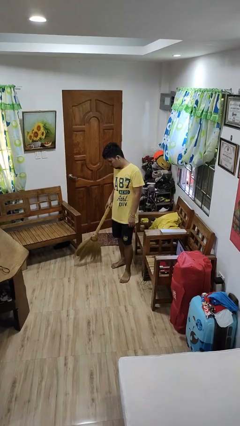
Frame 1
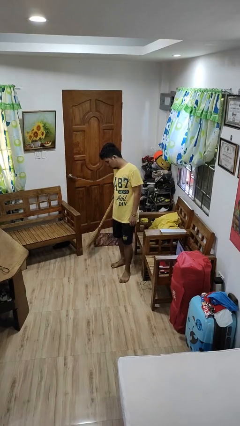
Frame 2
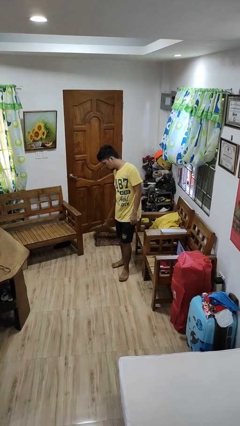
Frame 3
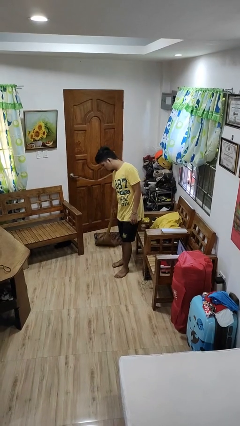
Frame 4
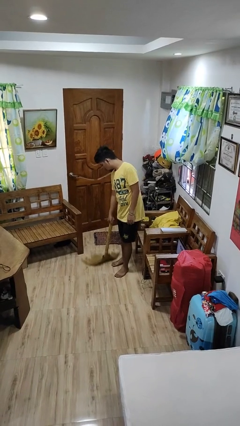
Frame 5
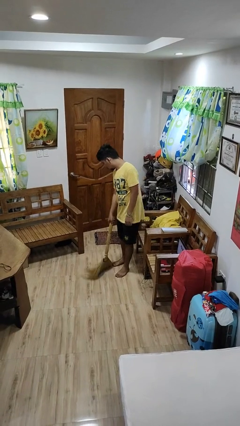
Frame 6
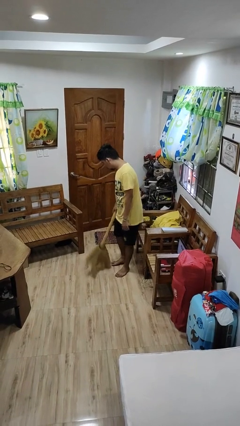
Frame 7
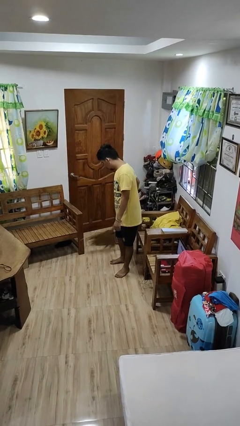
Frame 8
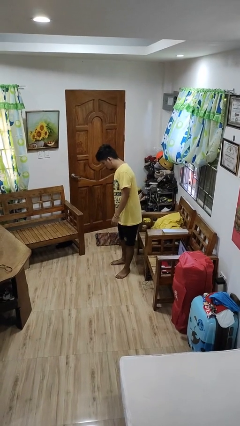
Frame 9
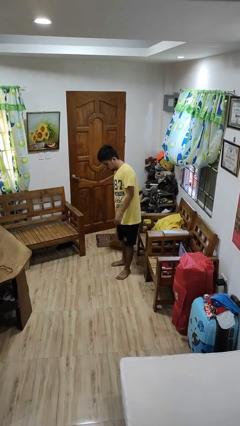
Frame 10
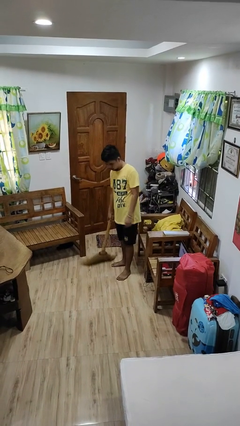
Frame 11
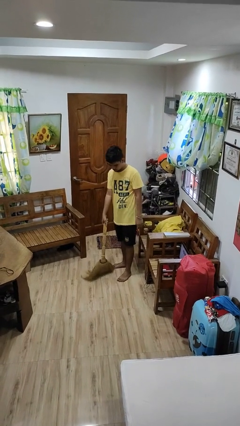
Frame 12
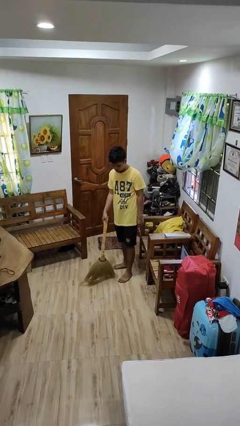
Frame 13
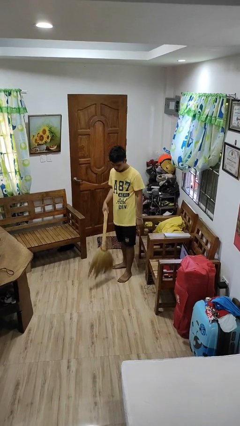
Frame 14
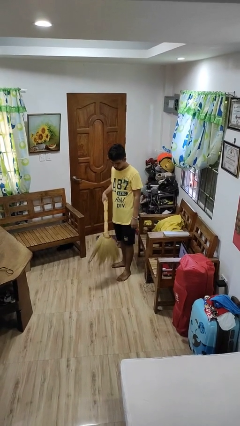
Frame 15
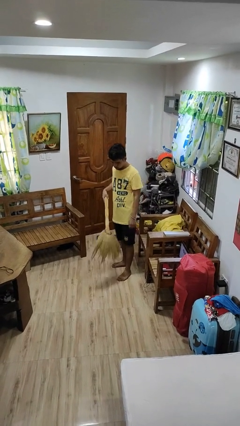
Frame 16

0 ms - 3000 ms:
person sweeps floor

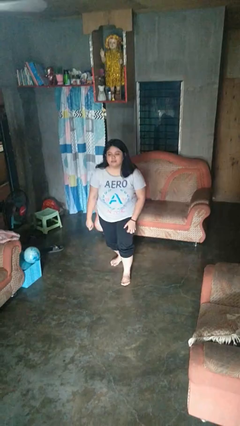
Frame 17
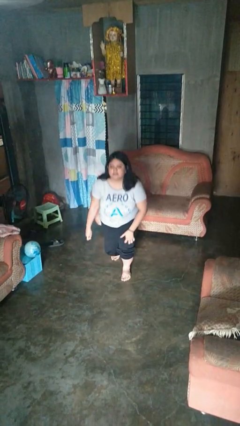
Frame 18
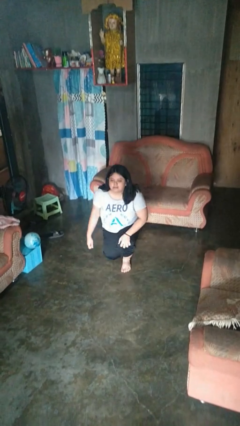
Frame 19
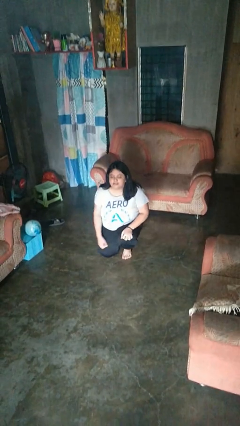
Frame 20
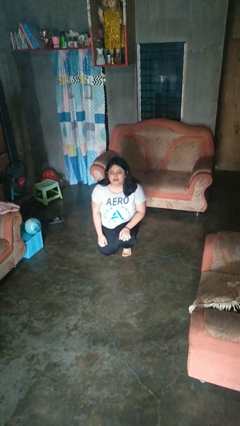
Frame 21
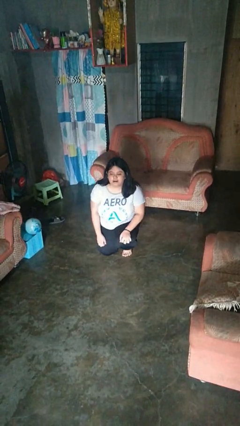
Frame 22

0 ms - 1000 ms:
person kneels

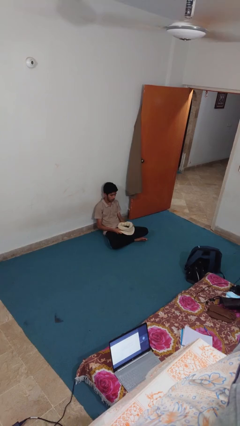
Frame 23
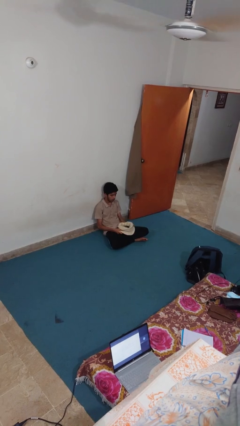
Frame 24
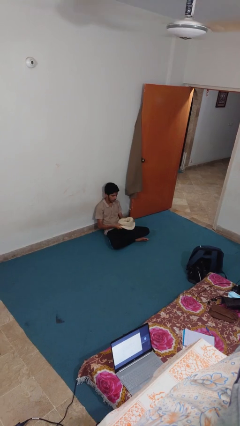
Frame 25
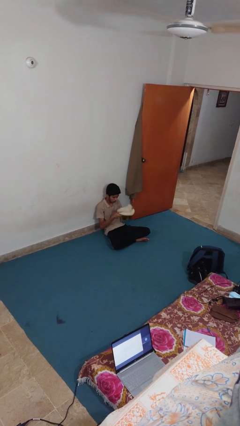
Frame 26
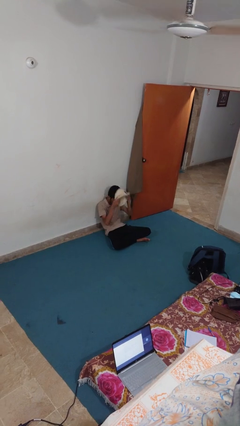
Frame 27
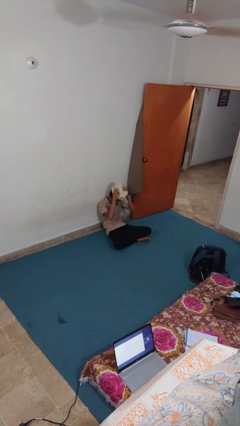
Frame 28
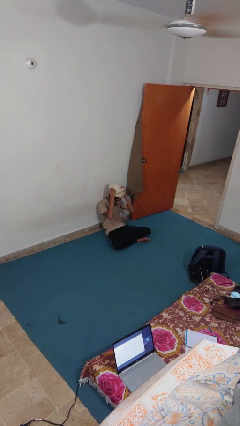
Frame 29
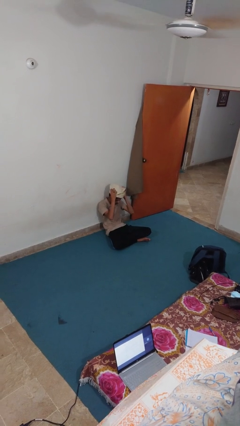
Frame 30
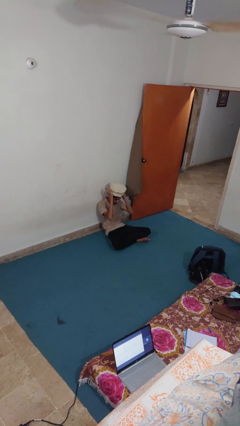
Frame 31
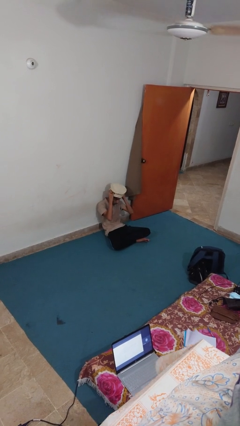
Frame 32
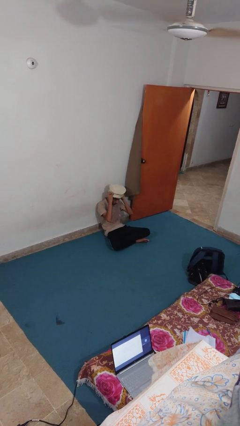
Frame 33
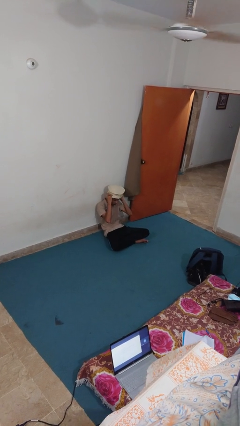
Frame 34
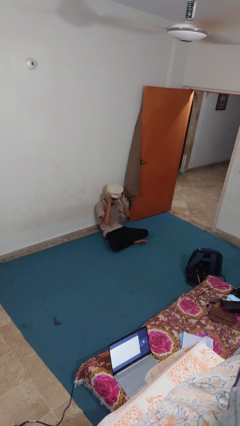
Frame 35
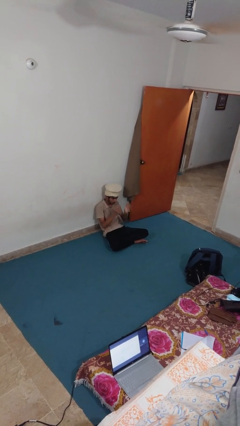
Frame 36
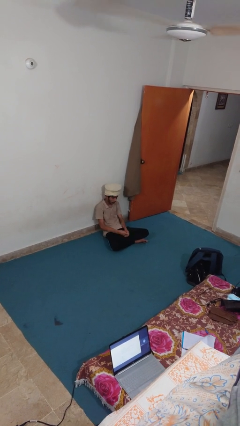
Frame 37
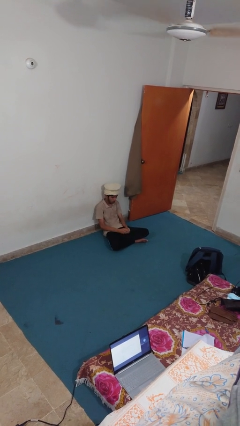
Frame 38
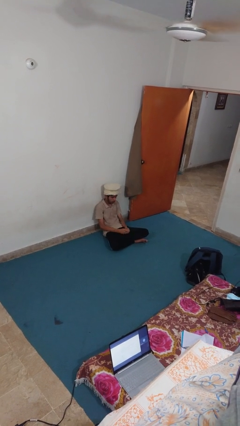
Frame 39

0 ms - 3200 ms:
person puts on hat

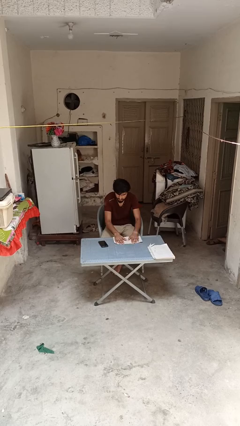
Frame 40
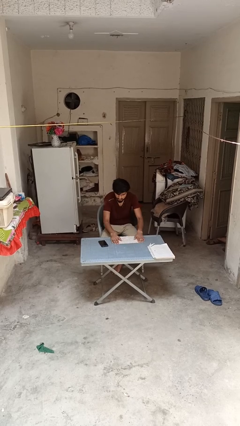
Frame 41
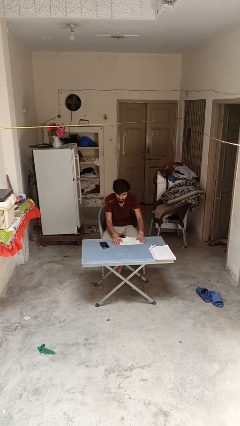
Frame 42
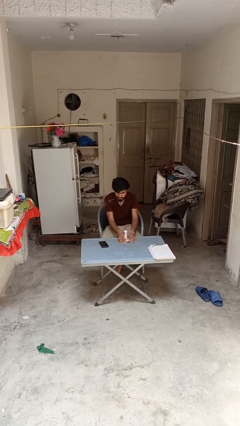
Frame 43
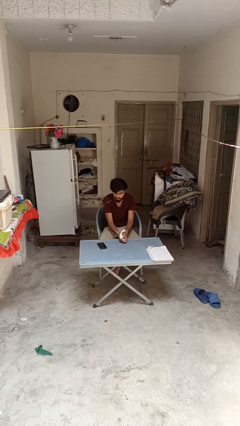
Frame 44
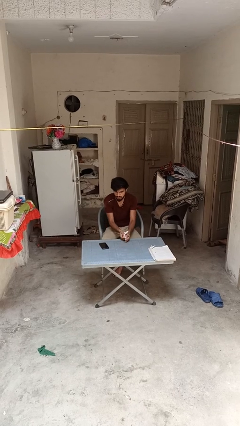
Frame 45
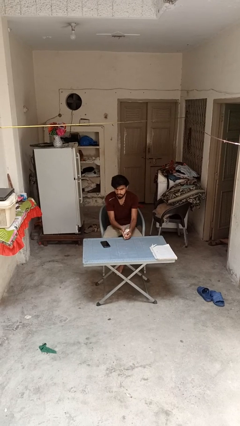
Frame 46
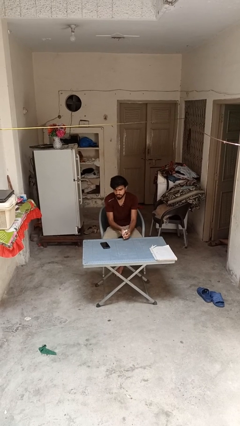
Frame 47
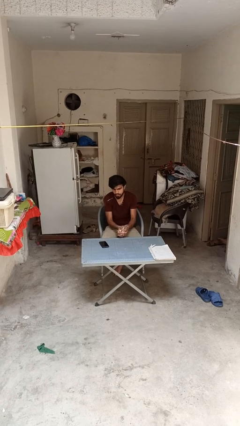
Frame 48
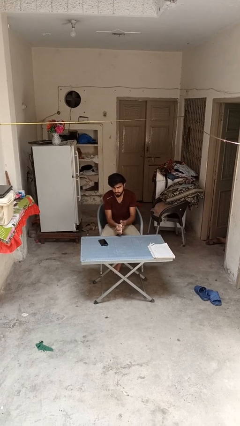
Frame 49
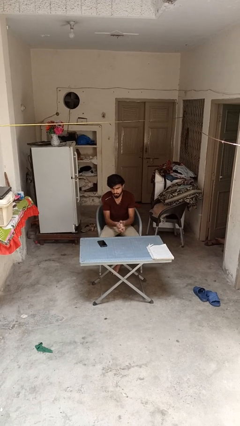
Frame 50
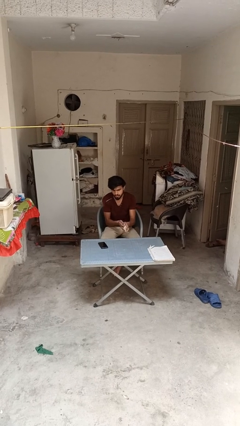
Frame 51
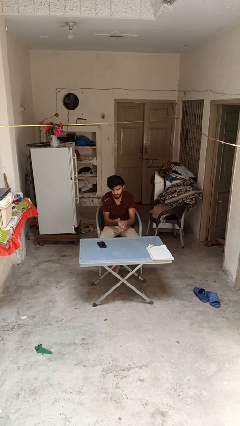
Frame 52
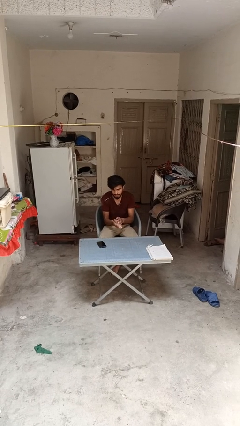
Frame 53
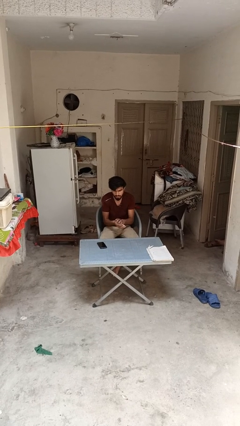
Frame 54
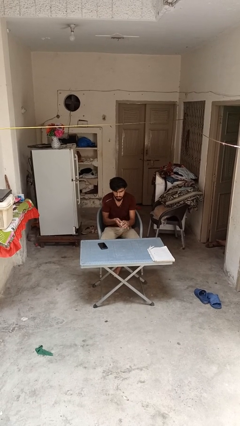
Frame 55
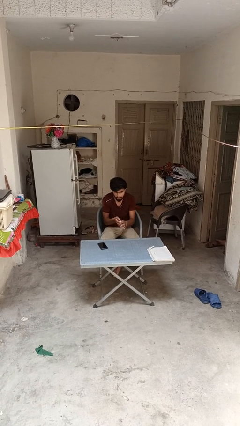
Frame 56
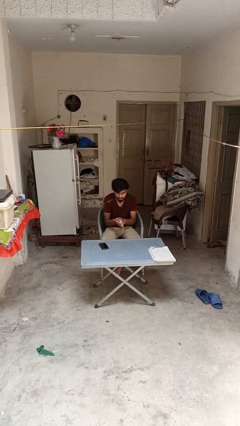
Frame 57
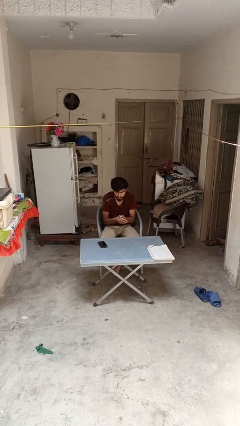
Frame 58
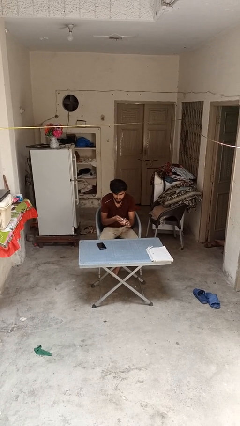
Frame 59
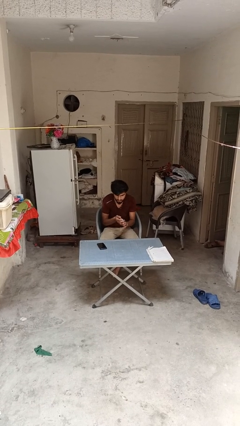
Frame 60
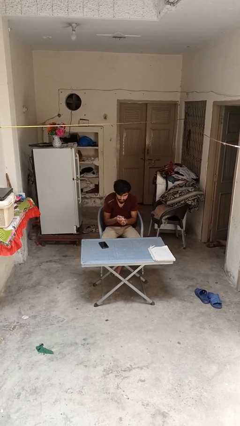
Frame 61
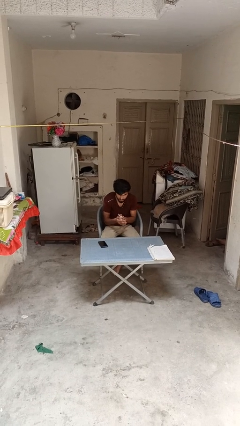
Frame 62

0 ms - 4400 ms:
person crumples paper

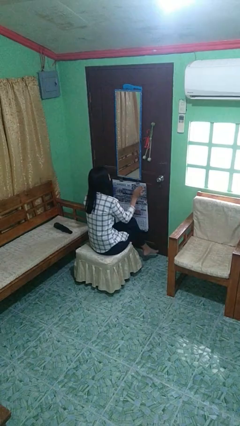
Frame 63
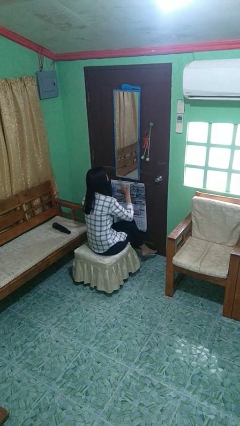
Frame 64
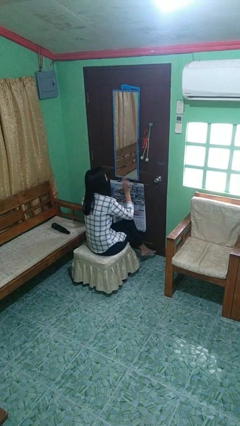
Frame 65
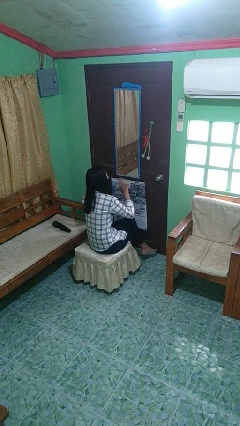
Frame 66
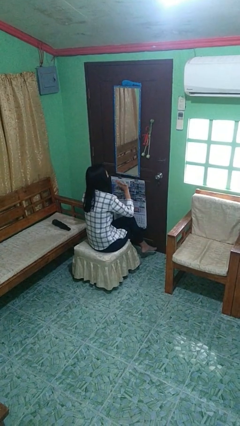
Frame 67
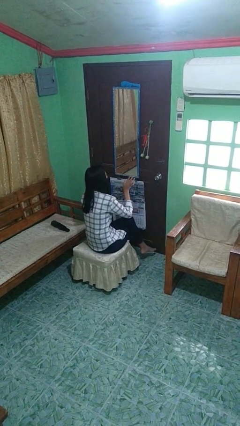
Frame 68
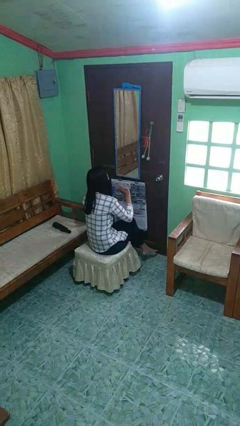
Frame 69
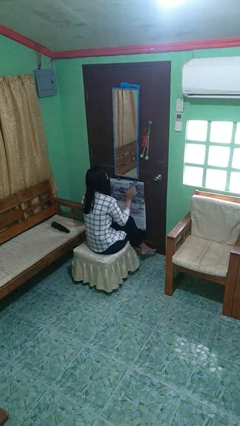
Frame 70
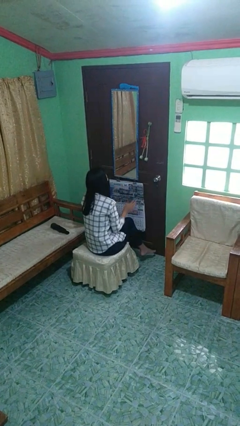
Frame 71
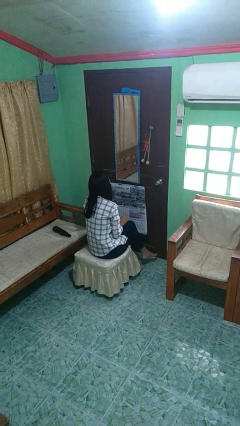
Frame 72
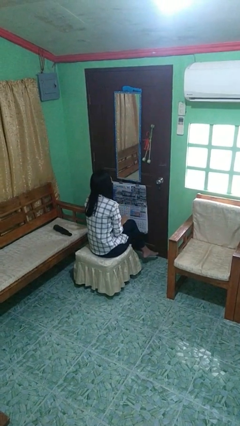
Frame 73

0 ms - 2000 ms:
person waves hand over object

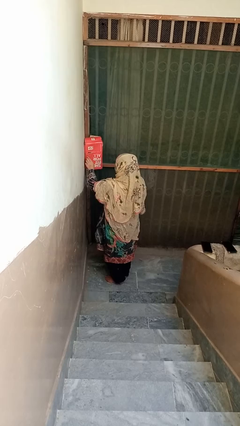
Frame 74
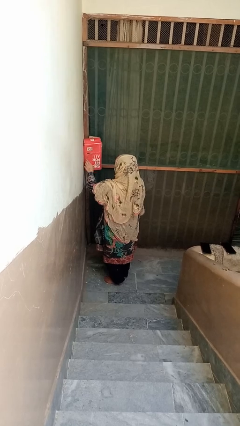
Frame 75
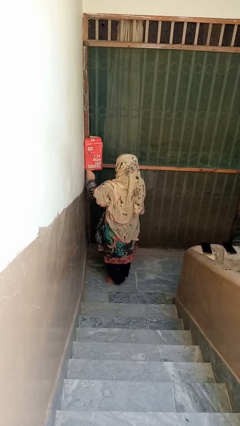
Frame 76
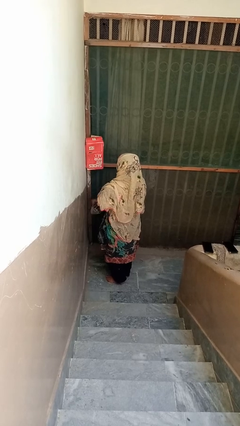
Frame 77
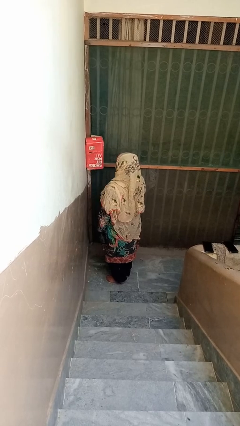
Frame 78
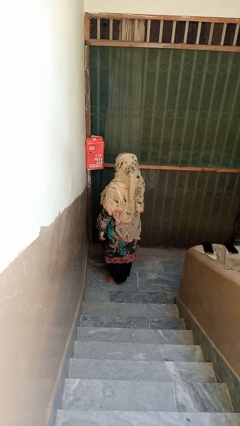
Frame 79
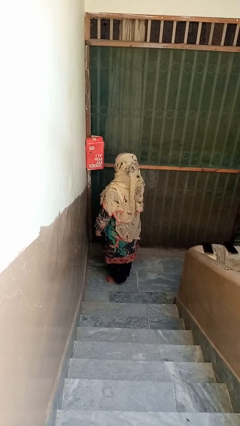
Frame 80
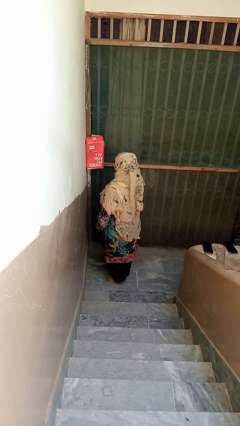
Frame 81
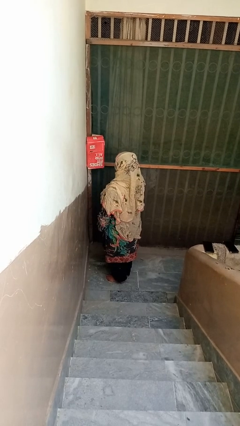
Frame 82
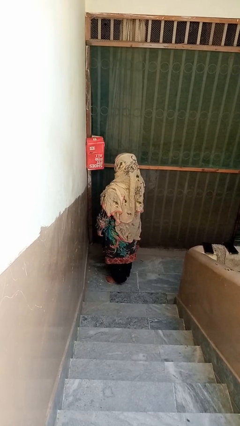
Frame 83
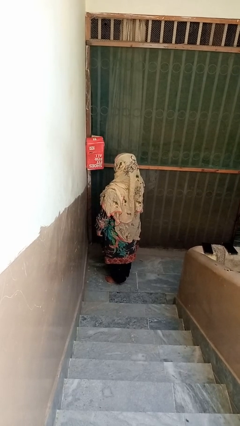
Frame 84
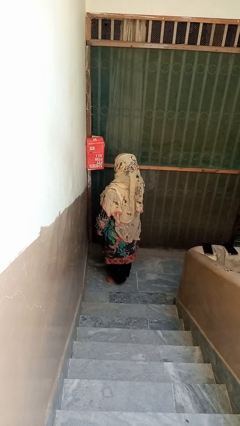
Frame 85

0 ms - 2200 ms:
person closes mailbox

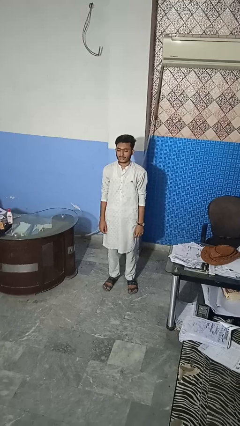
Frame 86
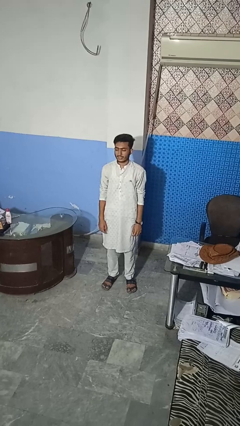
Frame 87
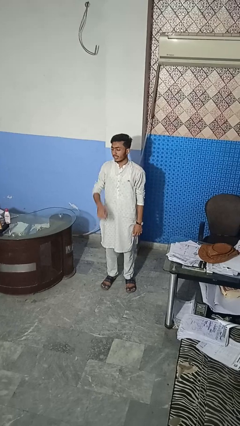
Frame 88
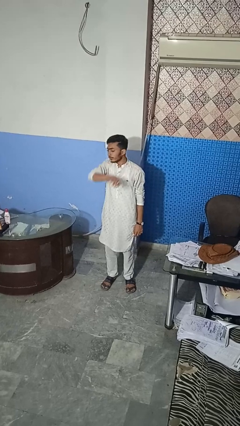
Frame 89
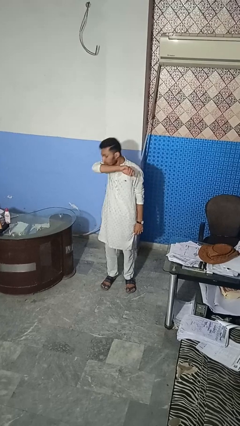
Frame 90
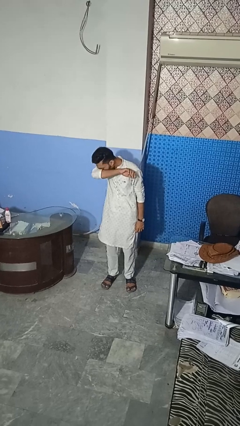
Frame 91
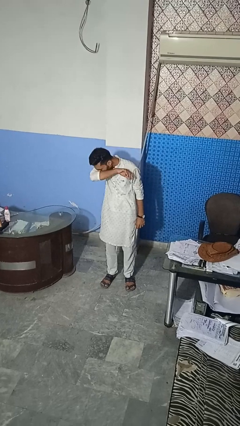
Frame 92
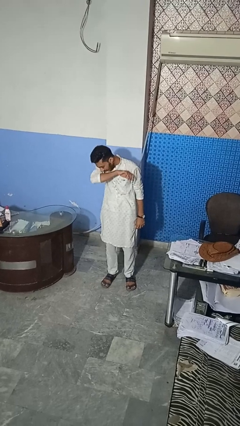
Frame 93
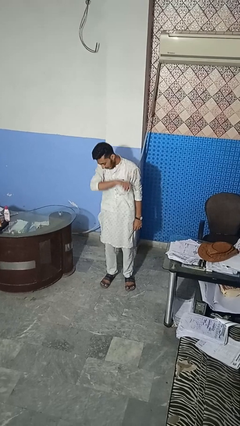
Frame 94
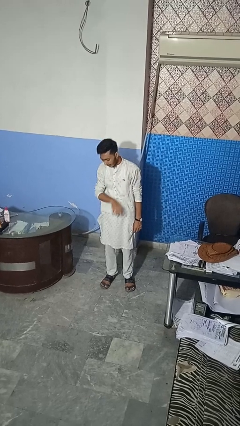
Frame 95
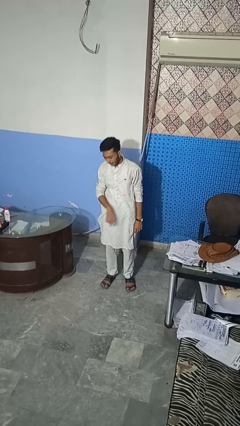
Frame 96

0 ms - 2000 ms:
person sneezes into arm
